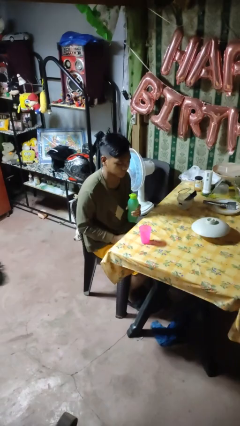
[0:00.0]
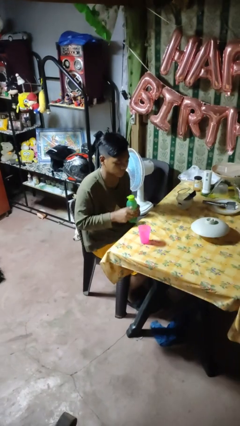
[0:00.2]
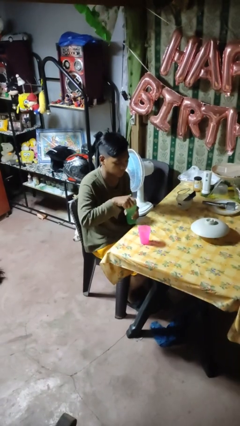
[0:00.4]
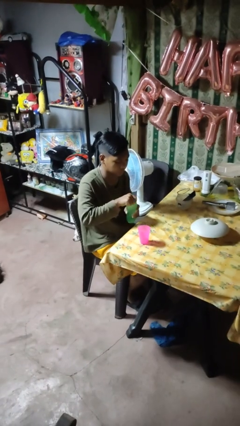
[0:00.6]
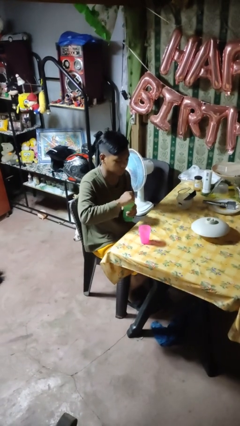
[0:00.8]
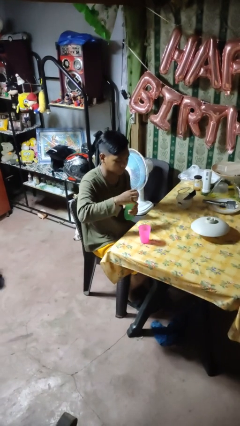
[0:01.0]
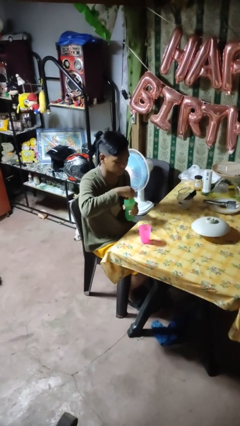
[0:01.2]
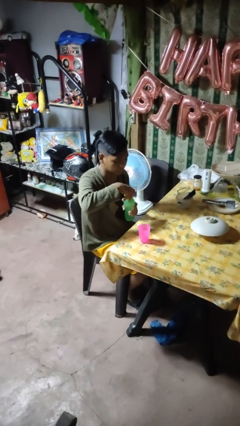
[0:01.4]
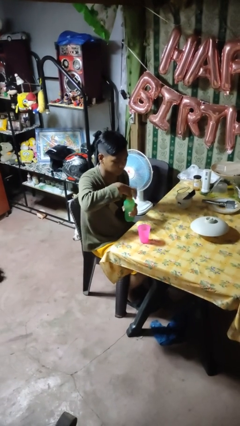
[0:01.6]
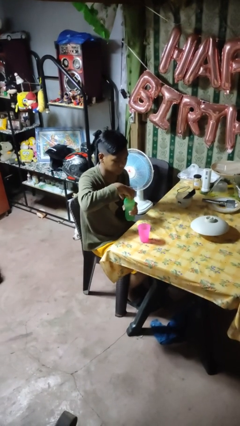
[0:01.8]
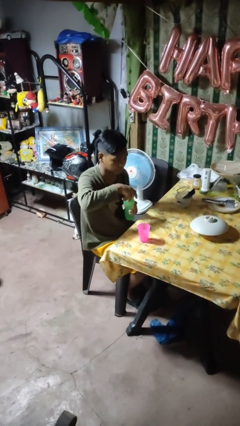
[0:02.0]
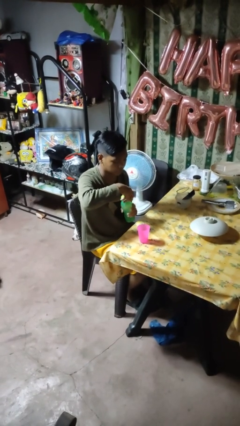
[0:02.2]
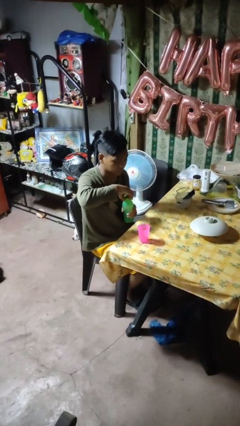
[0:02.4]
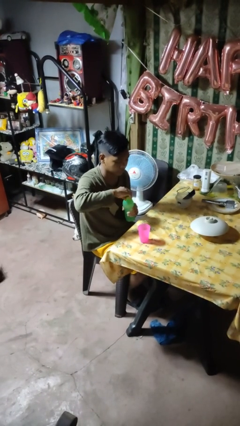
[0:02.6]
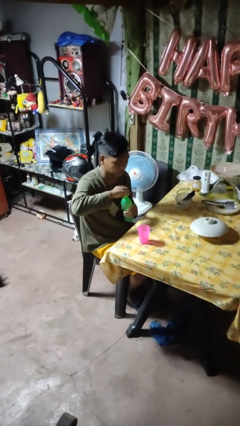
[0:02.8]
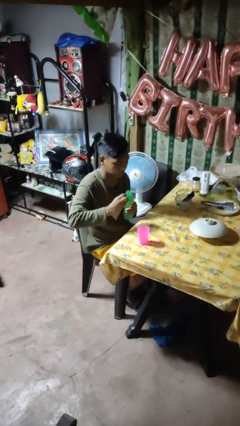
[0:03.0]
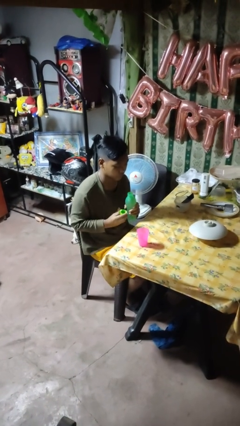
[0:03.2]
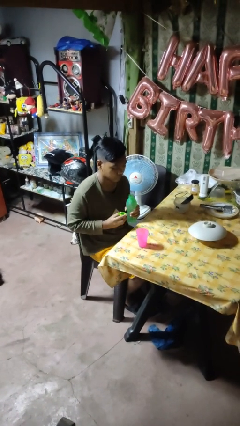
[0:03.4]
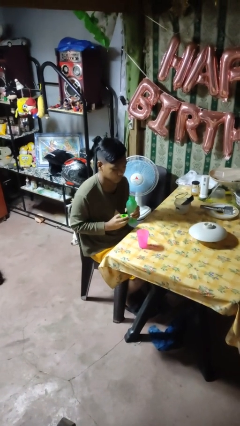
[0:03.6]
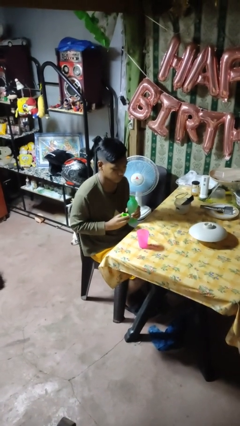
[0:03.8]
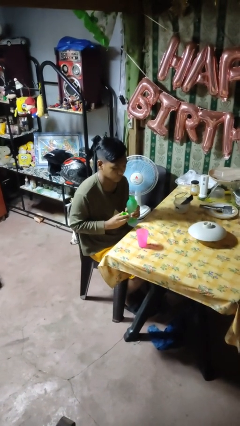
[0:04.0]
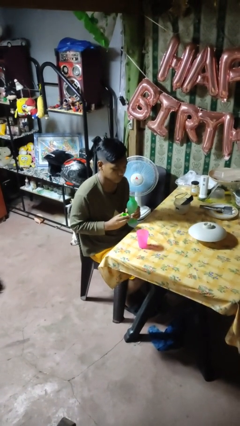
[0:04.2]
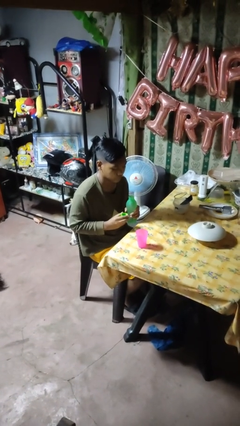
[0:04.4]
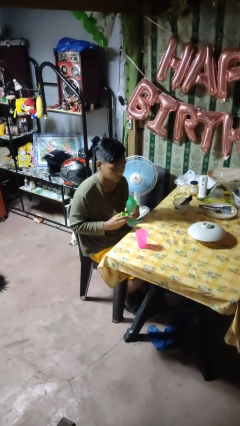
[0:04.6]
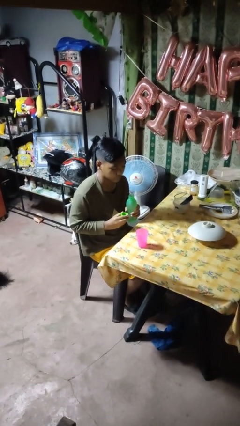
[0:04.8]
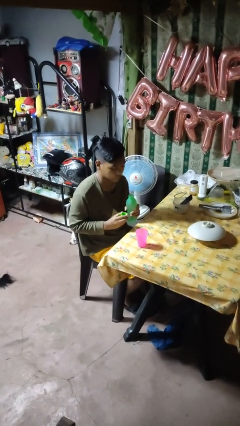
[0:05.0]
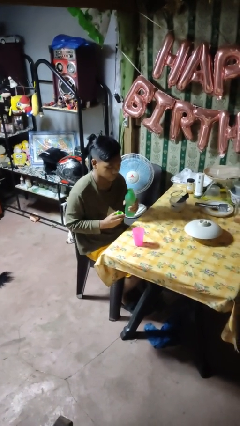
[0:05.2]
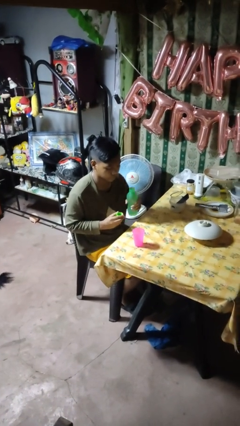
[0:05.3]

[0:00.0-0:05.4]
person unscrews lid from bottle

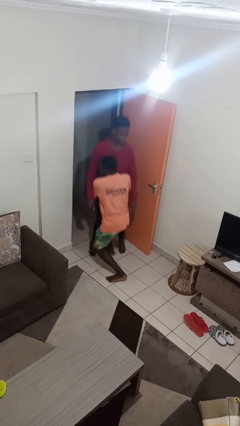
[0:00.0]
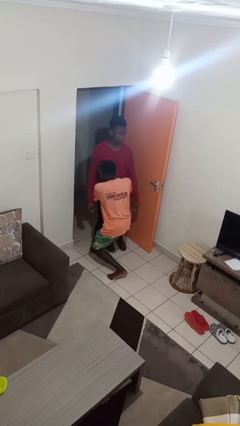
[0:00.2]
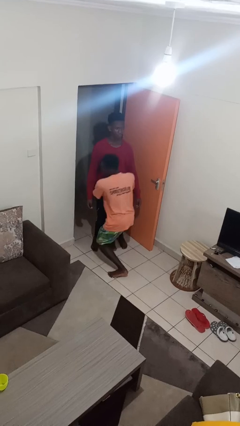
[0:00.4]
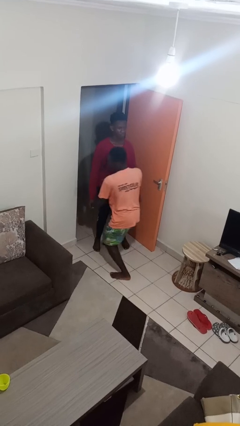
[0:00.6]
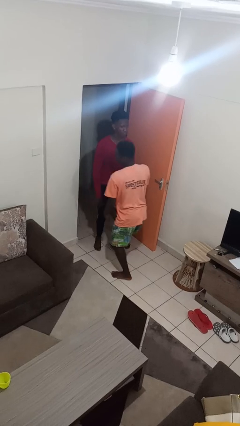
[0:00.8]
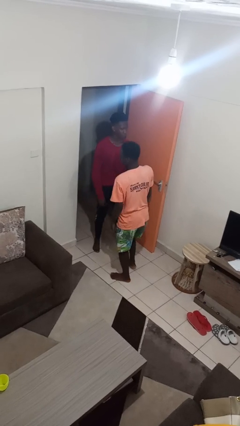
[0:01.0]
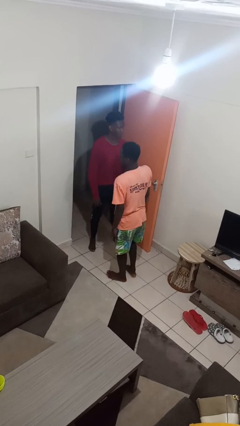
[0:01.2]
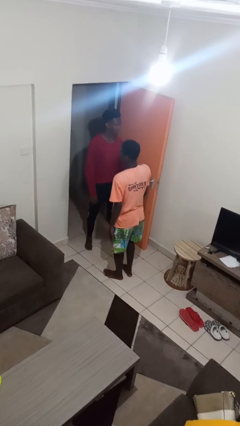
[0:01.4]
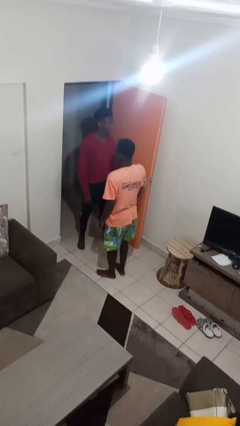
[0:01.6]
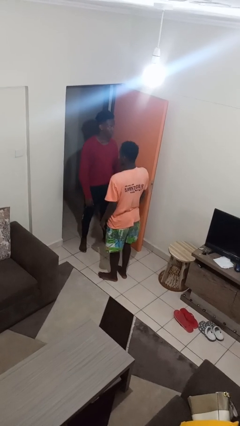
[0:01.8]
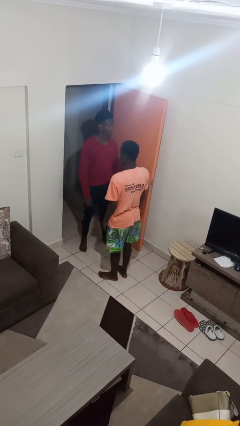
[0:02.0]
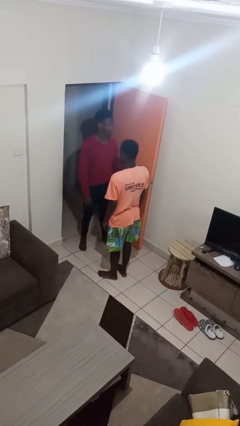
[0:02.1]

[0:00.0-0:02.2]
person puts down person

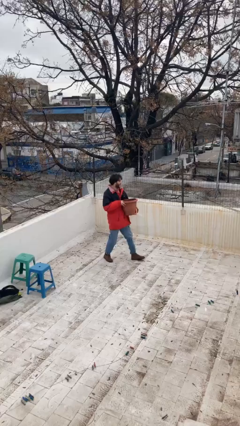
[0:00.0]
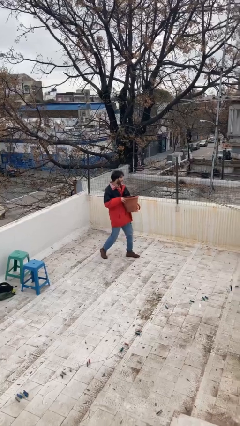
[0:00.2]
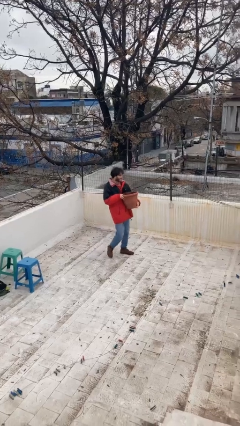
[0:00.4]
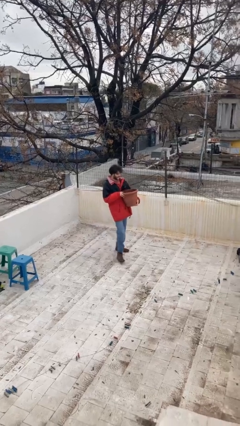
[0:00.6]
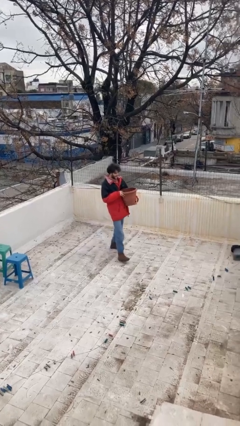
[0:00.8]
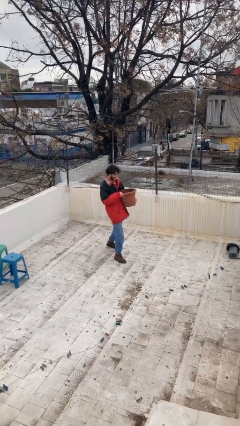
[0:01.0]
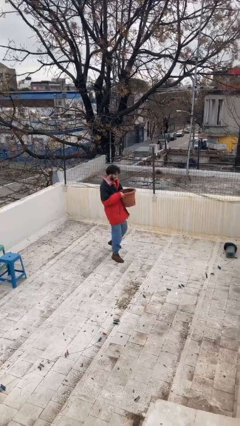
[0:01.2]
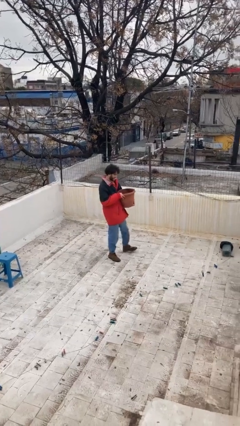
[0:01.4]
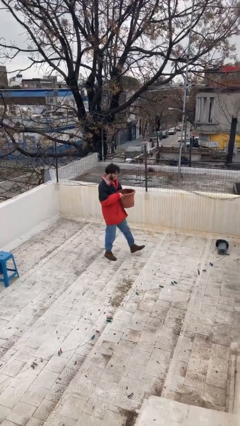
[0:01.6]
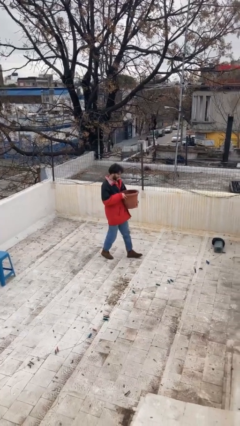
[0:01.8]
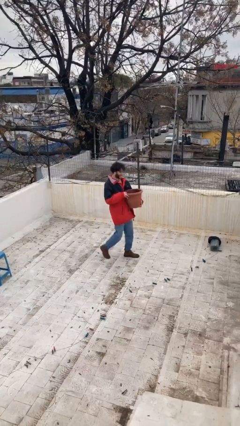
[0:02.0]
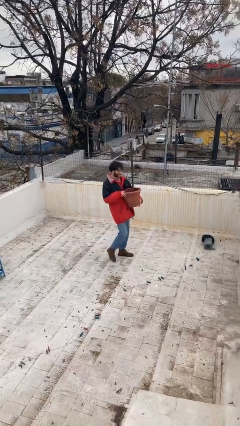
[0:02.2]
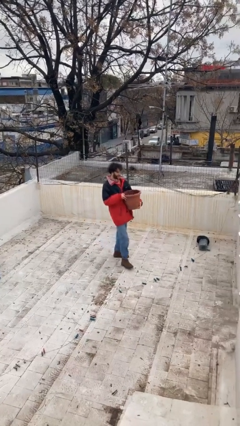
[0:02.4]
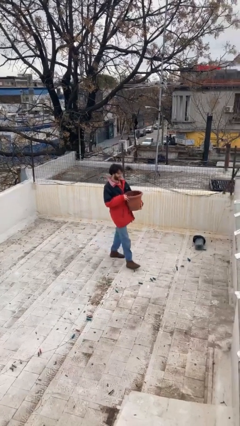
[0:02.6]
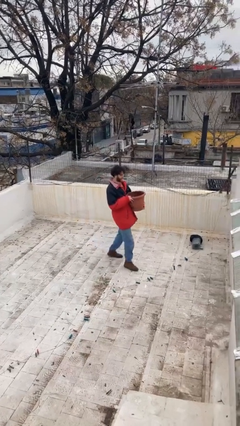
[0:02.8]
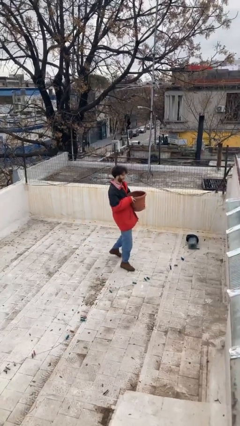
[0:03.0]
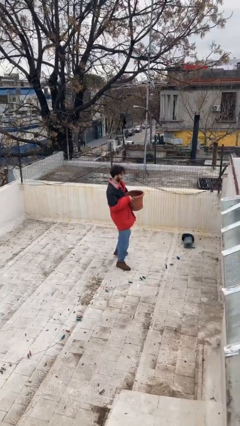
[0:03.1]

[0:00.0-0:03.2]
person carries heavy object

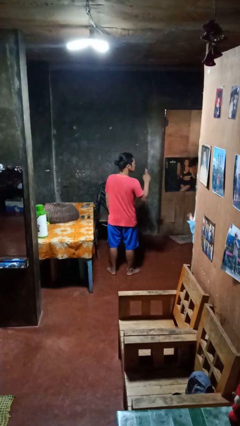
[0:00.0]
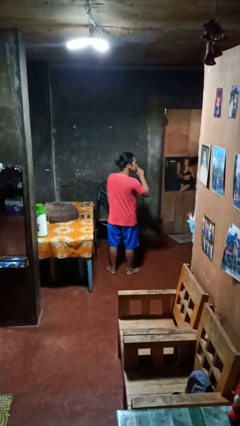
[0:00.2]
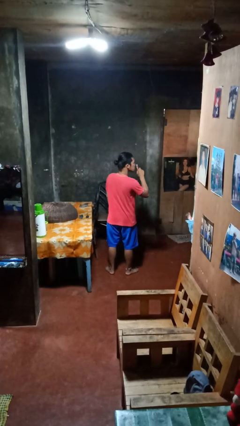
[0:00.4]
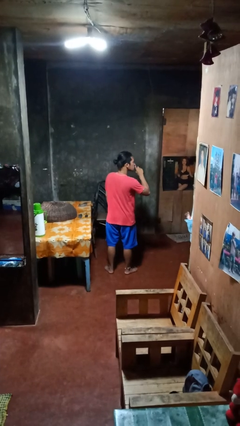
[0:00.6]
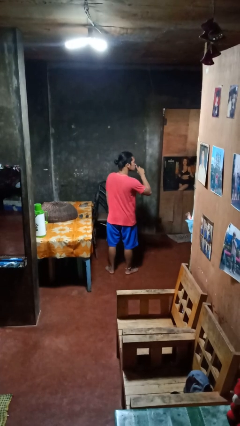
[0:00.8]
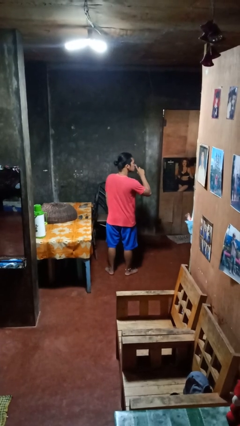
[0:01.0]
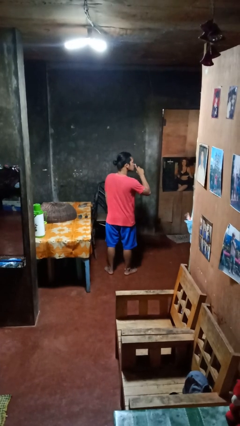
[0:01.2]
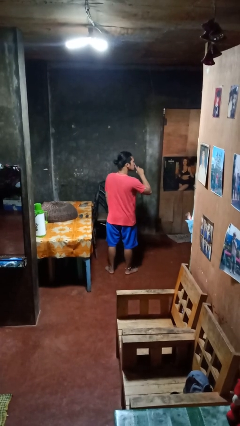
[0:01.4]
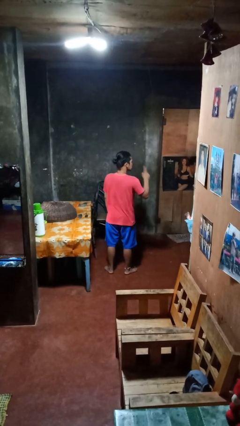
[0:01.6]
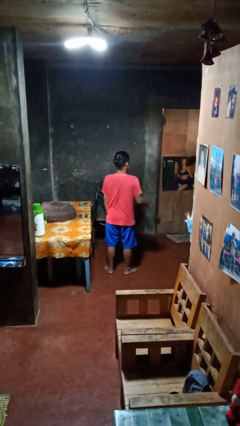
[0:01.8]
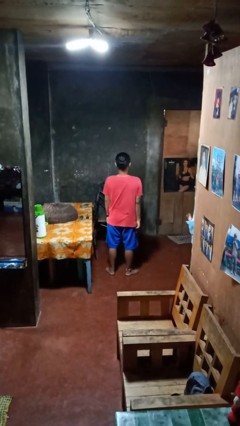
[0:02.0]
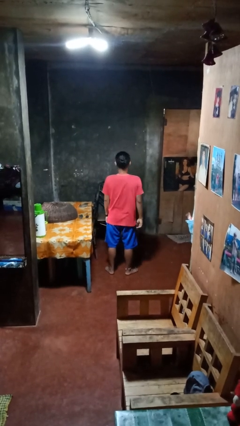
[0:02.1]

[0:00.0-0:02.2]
person gestures be quiet

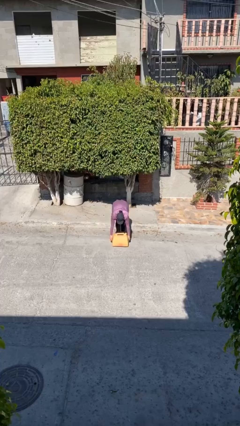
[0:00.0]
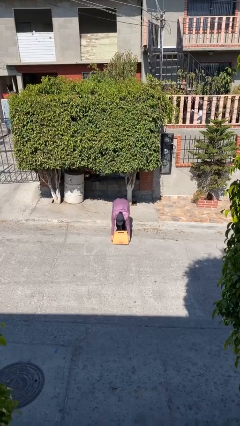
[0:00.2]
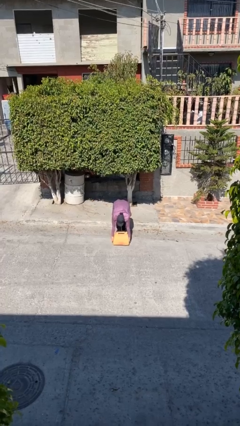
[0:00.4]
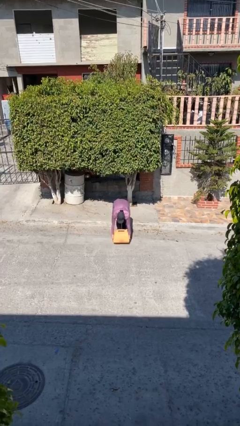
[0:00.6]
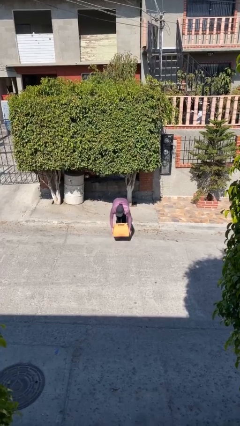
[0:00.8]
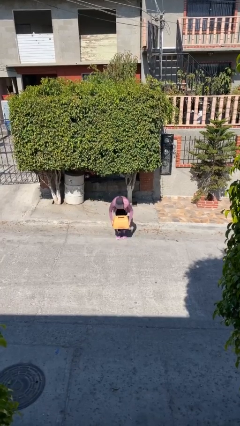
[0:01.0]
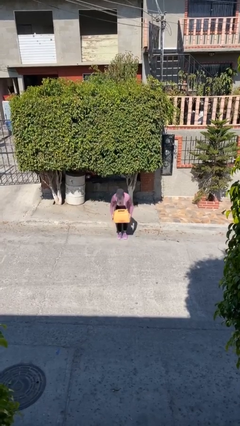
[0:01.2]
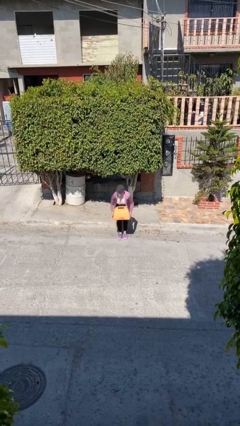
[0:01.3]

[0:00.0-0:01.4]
person picks up object from floor

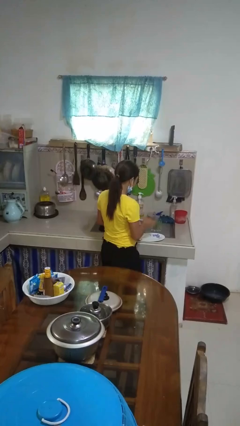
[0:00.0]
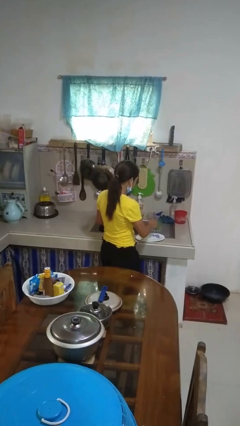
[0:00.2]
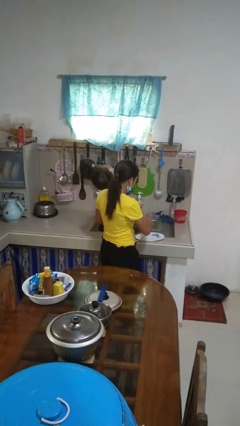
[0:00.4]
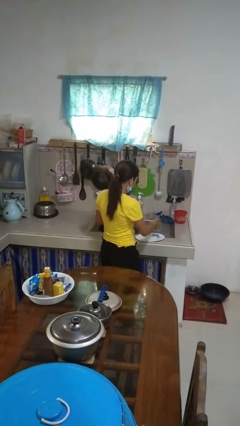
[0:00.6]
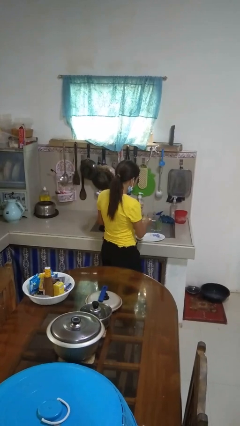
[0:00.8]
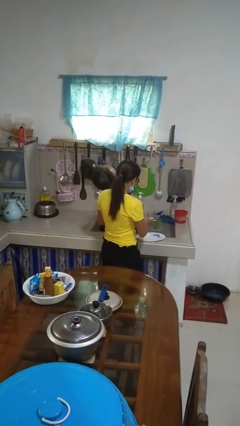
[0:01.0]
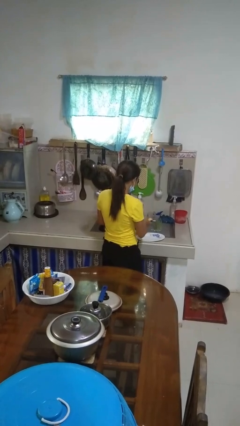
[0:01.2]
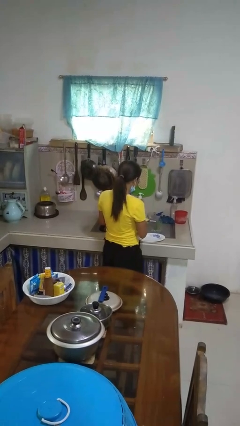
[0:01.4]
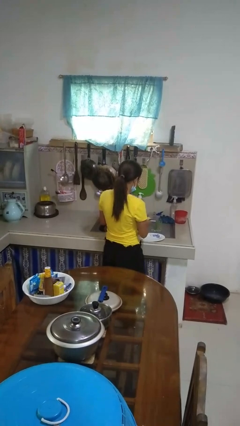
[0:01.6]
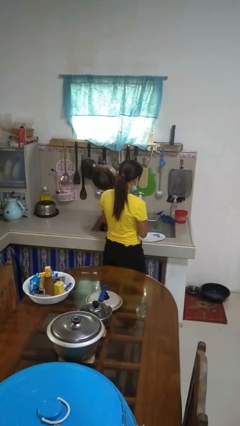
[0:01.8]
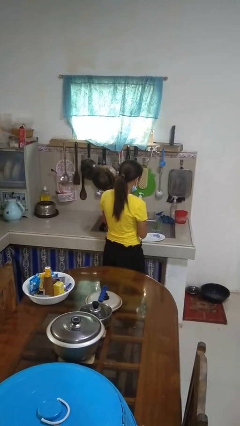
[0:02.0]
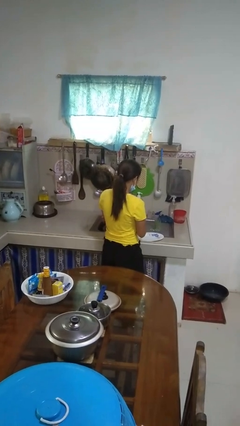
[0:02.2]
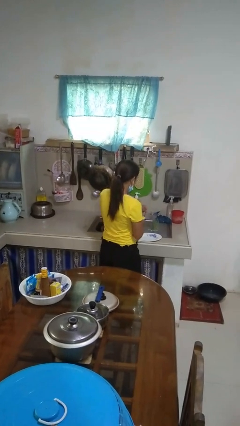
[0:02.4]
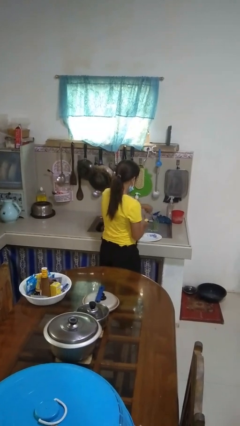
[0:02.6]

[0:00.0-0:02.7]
person washes dish
